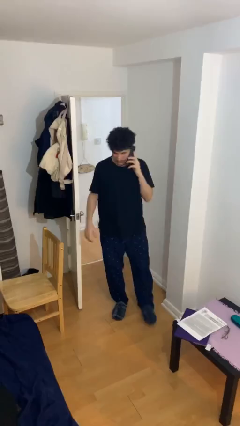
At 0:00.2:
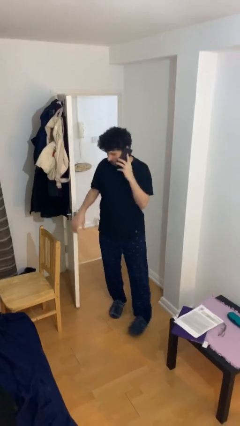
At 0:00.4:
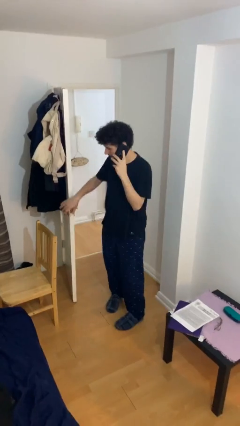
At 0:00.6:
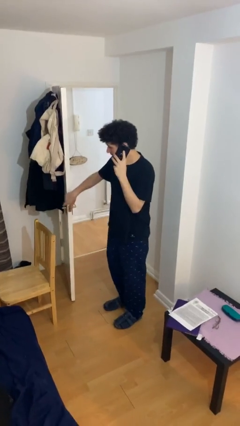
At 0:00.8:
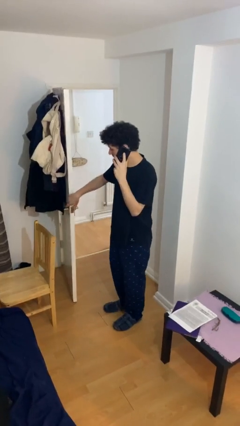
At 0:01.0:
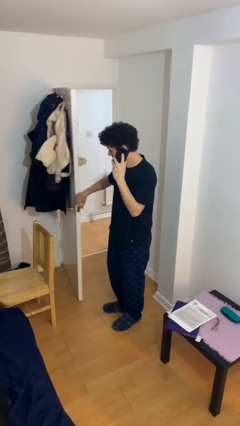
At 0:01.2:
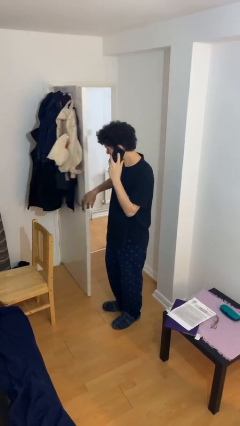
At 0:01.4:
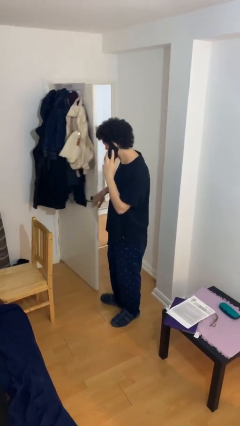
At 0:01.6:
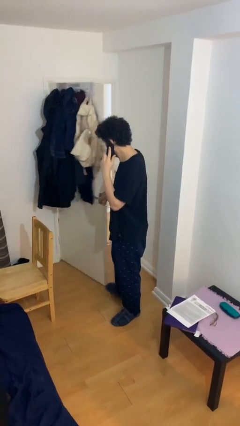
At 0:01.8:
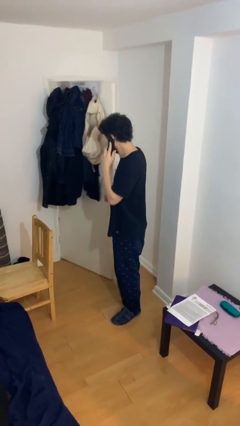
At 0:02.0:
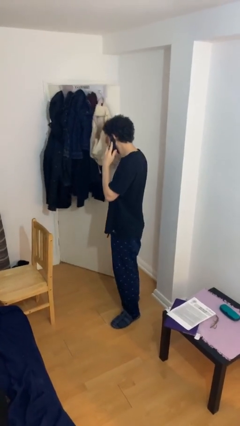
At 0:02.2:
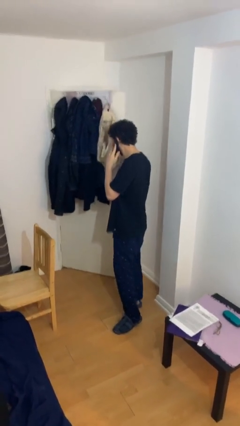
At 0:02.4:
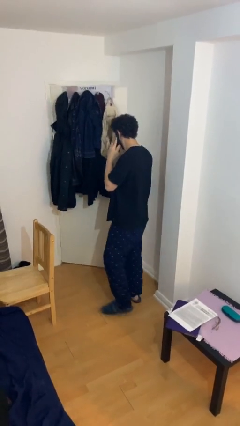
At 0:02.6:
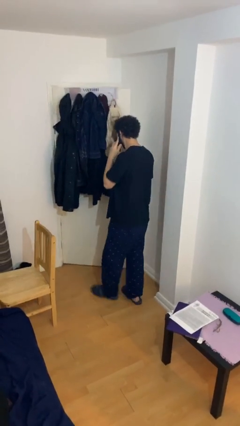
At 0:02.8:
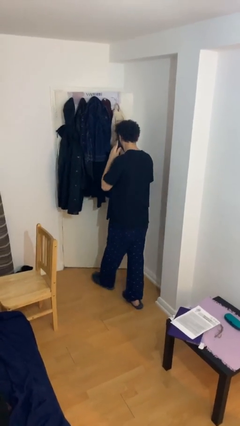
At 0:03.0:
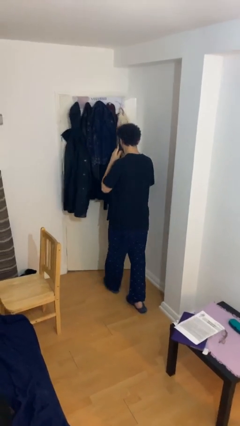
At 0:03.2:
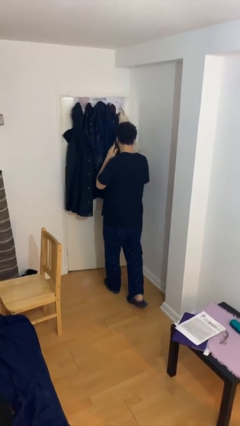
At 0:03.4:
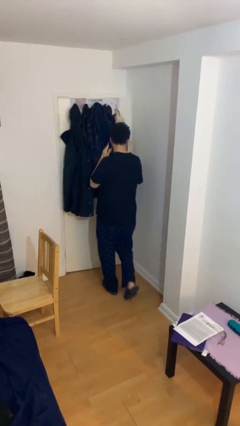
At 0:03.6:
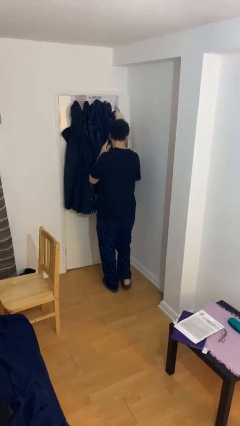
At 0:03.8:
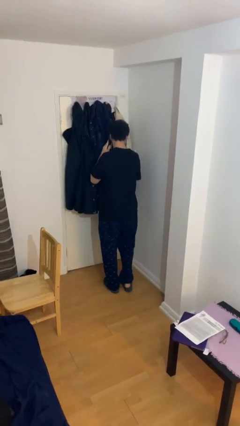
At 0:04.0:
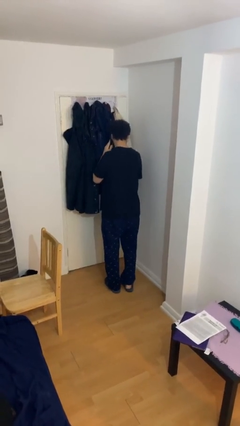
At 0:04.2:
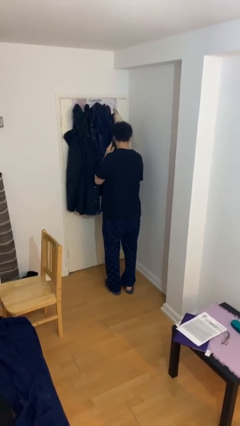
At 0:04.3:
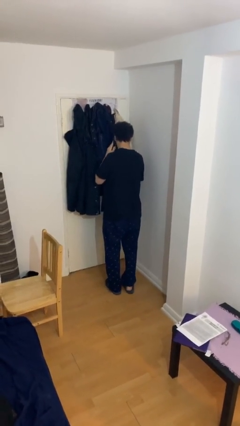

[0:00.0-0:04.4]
person closes facility door

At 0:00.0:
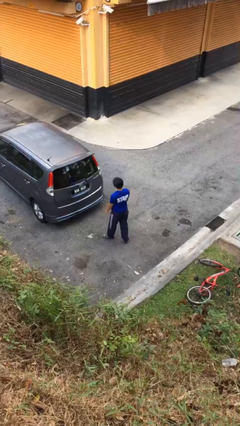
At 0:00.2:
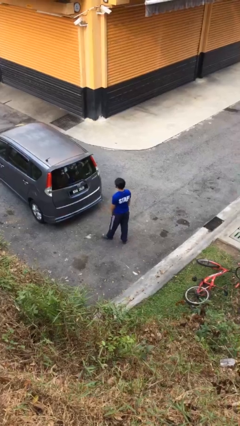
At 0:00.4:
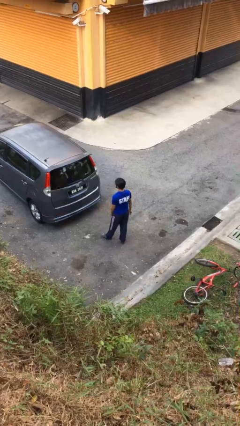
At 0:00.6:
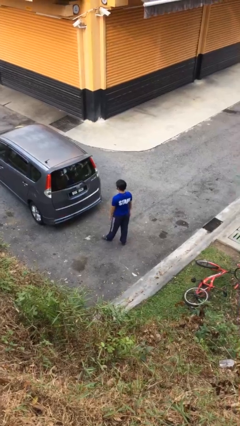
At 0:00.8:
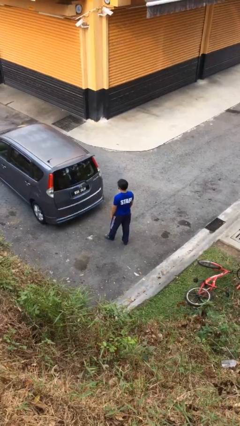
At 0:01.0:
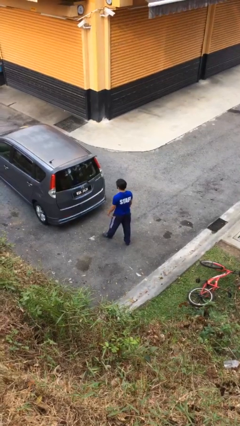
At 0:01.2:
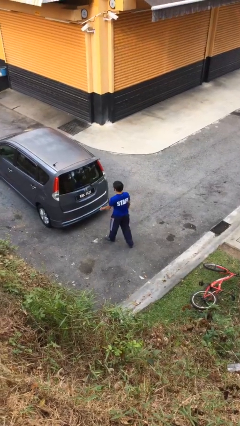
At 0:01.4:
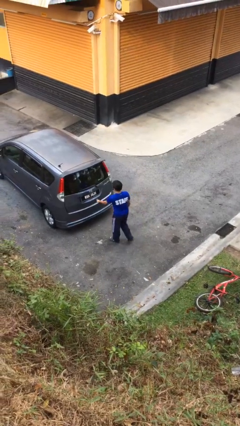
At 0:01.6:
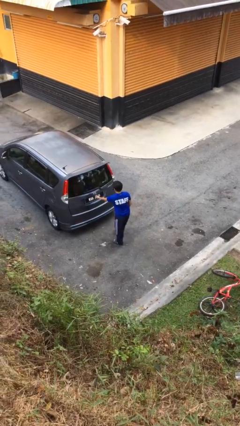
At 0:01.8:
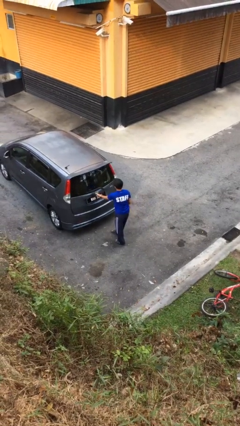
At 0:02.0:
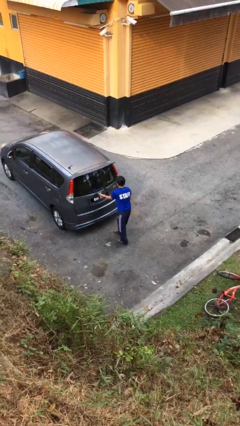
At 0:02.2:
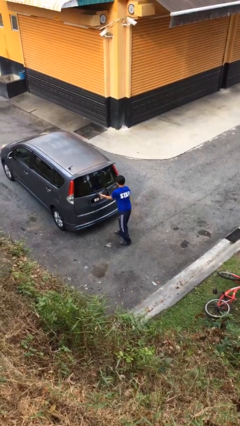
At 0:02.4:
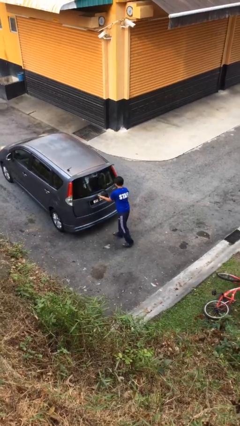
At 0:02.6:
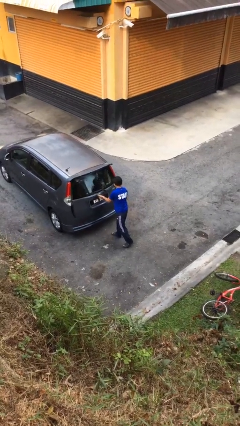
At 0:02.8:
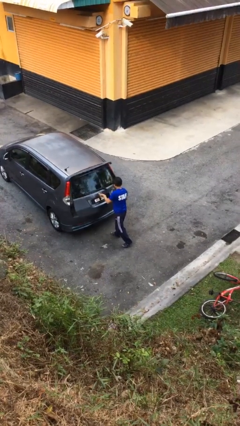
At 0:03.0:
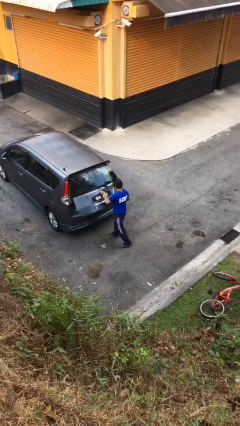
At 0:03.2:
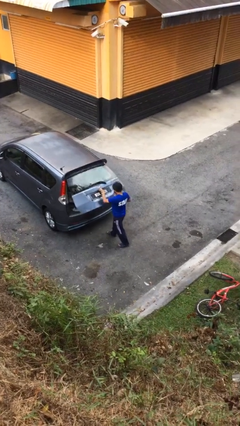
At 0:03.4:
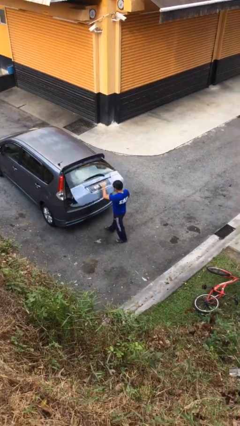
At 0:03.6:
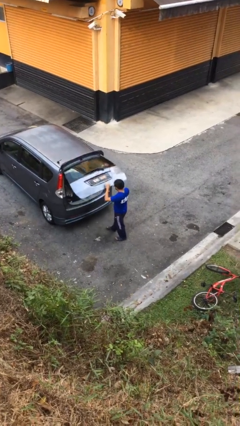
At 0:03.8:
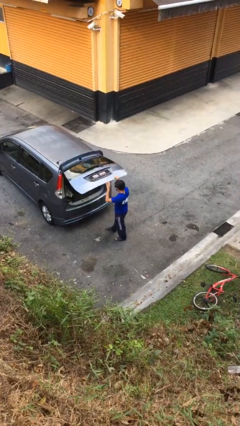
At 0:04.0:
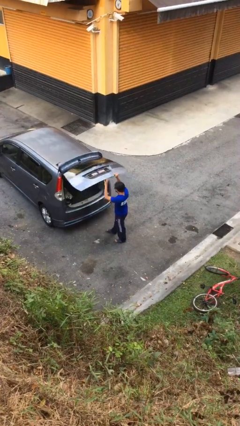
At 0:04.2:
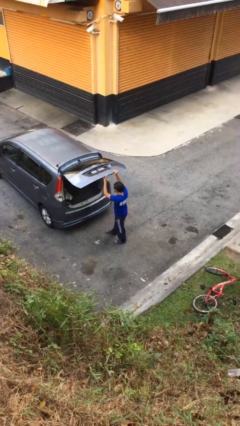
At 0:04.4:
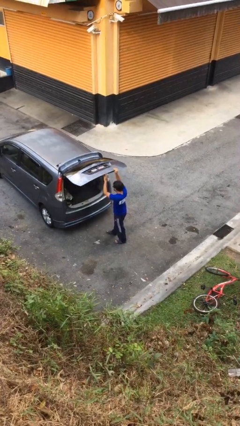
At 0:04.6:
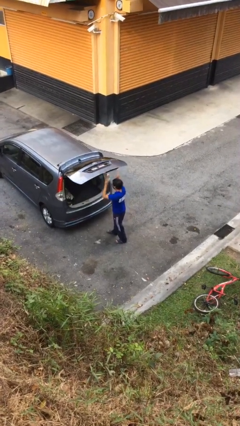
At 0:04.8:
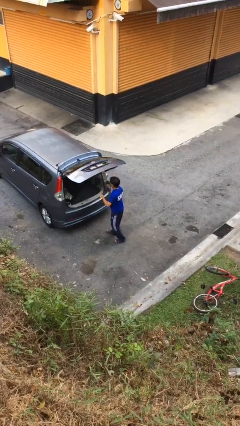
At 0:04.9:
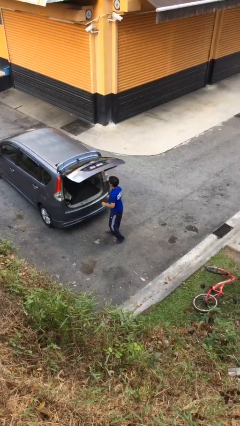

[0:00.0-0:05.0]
person opens car trunk

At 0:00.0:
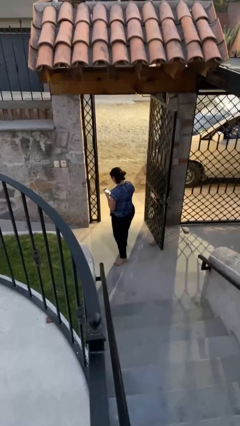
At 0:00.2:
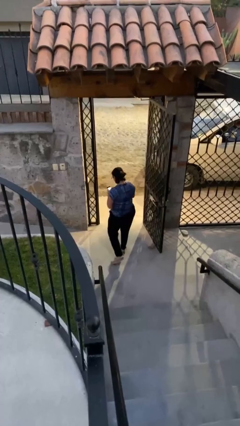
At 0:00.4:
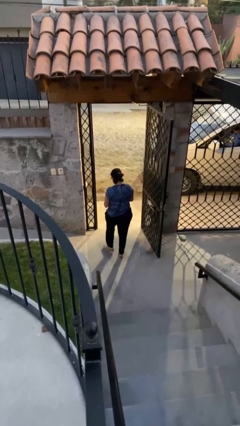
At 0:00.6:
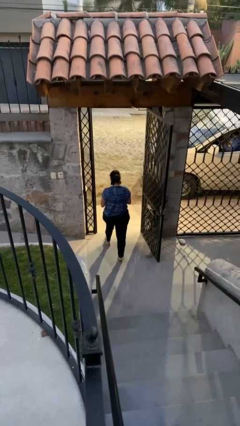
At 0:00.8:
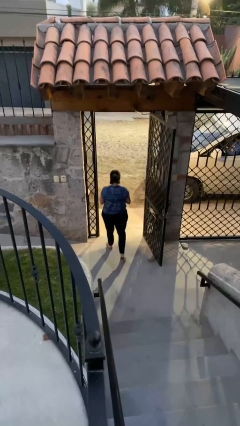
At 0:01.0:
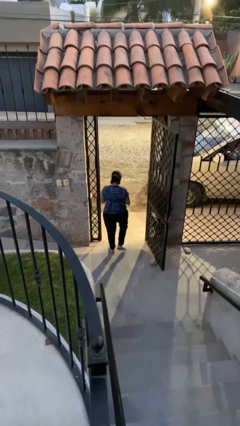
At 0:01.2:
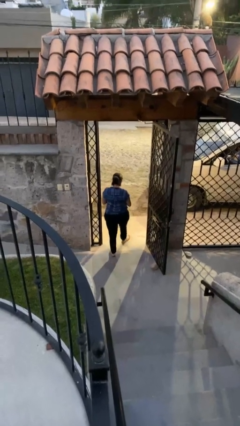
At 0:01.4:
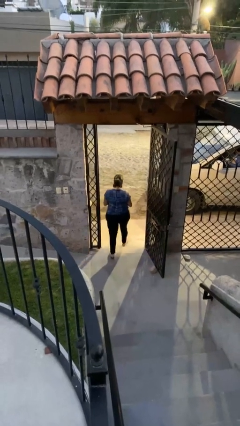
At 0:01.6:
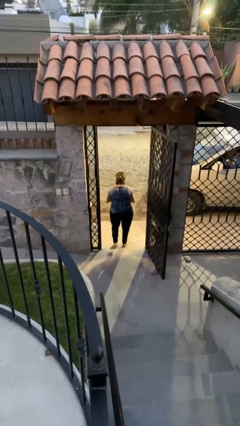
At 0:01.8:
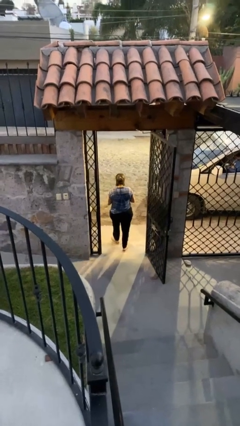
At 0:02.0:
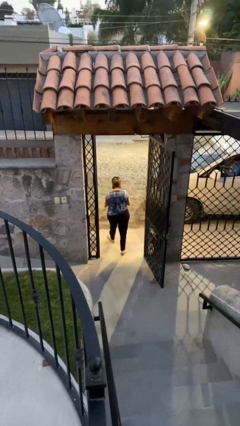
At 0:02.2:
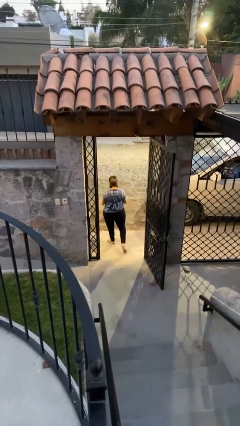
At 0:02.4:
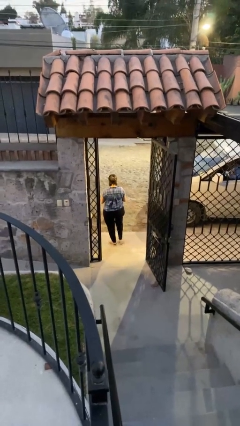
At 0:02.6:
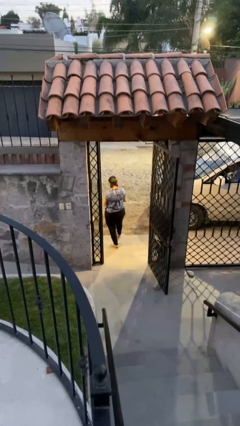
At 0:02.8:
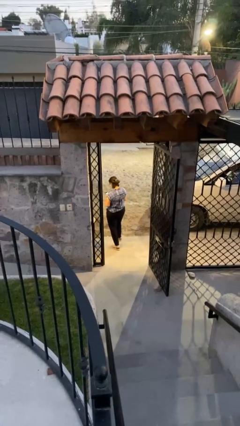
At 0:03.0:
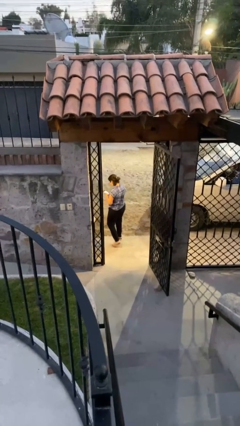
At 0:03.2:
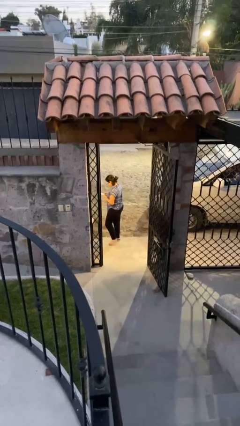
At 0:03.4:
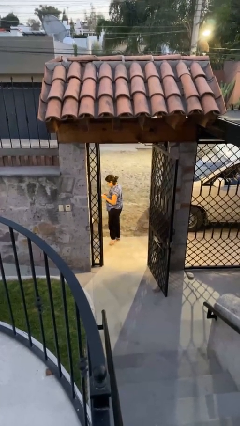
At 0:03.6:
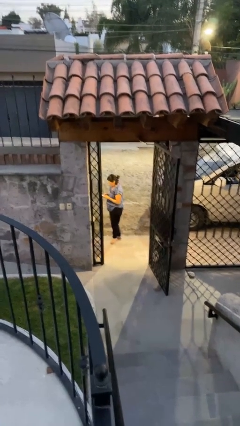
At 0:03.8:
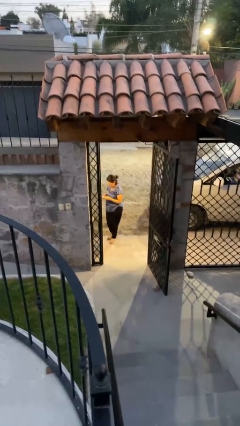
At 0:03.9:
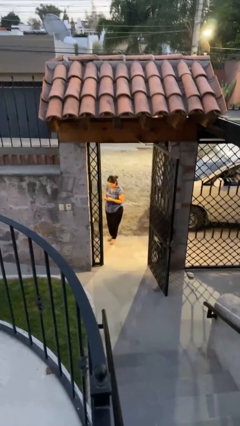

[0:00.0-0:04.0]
person exits scene through structure

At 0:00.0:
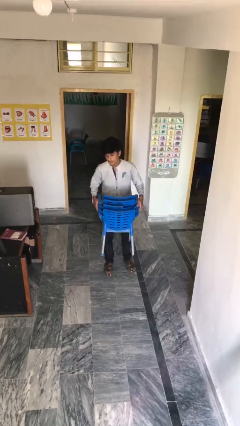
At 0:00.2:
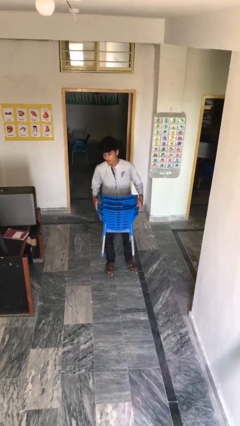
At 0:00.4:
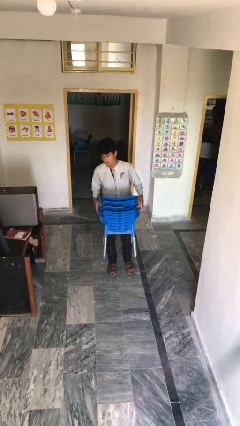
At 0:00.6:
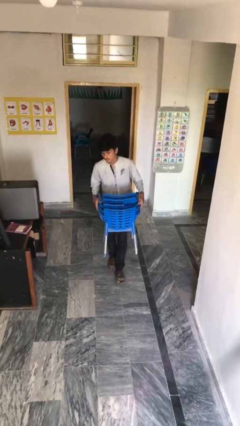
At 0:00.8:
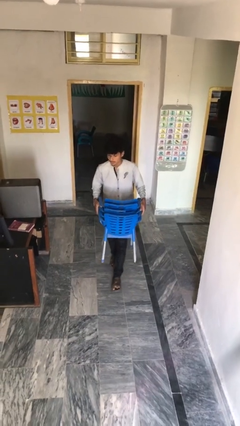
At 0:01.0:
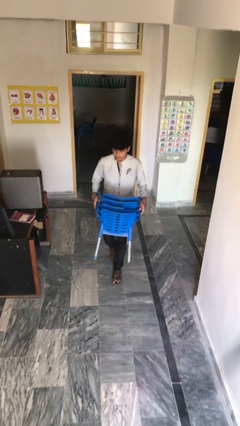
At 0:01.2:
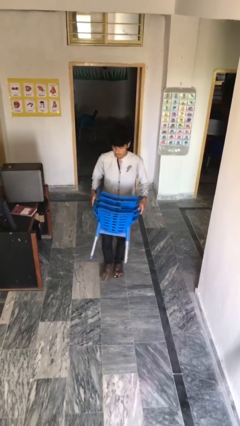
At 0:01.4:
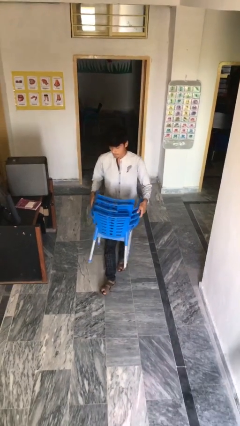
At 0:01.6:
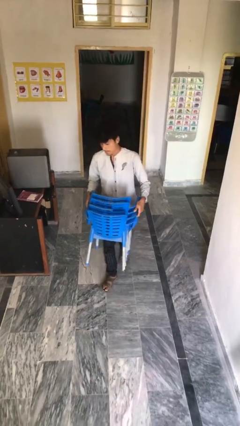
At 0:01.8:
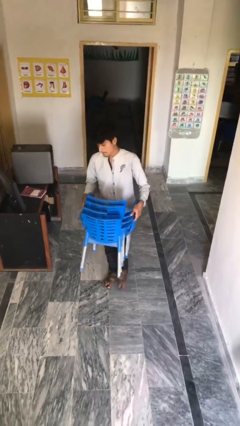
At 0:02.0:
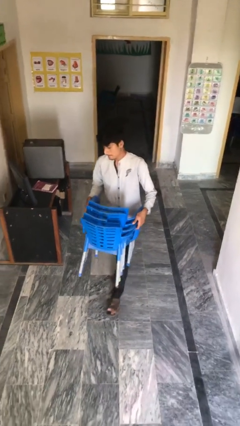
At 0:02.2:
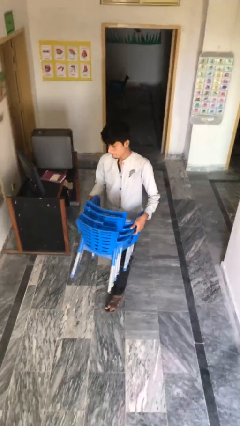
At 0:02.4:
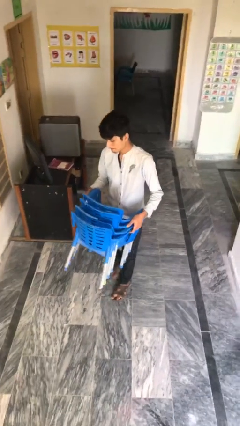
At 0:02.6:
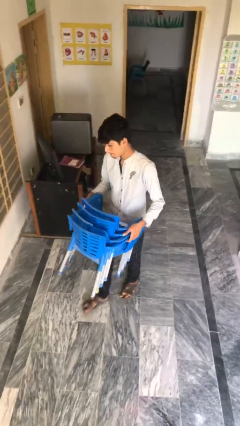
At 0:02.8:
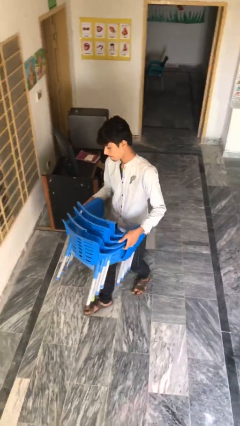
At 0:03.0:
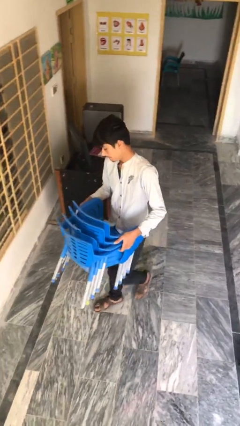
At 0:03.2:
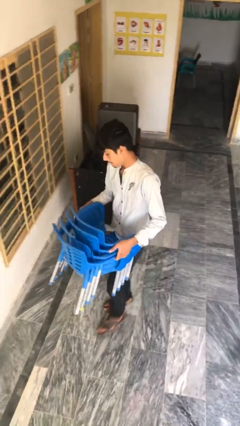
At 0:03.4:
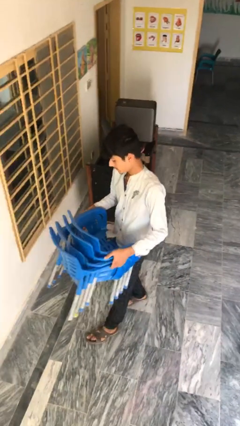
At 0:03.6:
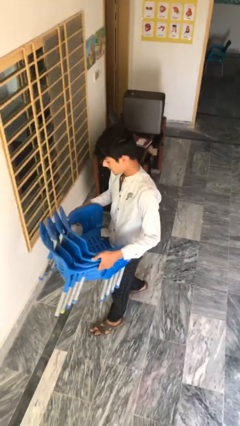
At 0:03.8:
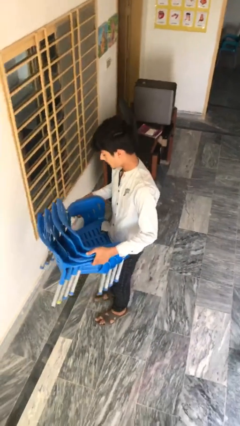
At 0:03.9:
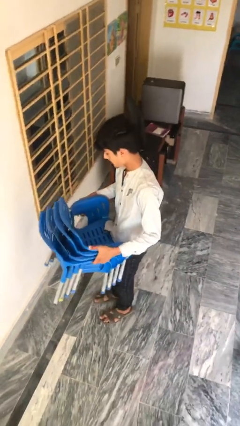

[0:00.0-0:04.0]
person carries heavy object
